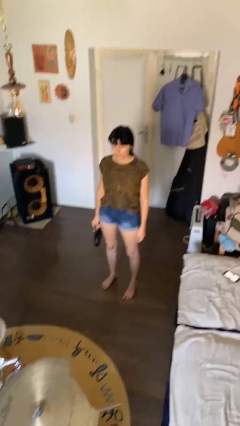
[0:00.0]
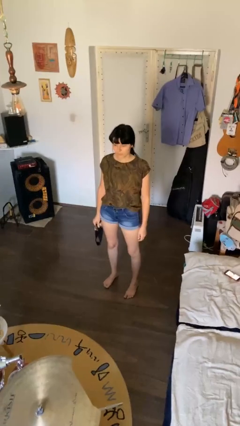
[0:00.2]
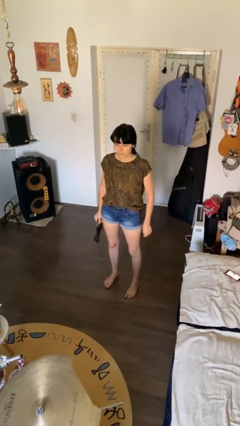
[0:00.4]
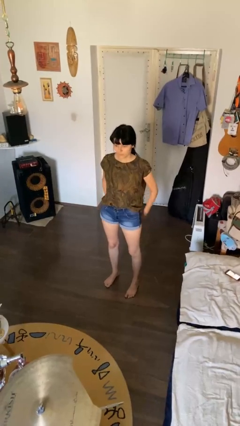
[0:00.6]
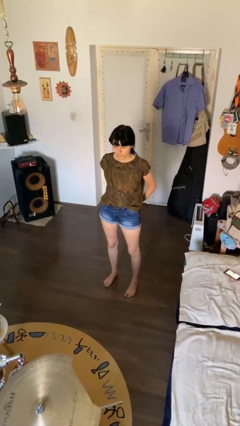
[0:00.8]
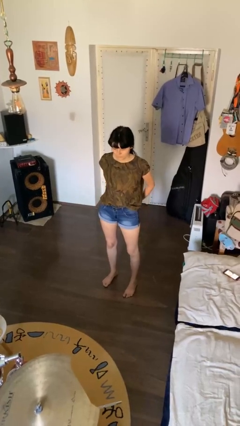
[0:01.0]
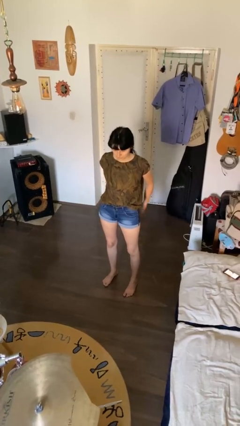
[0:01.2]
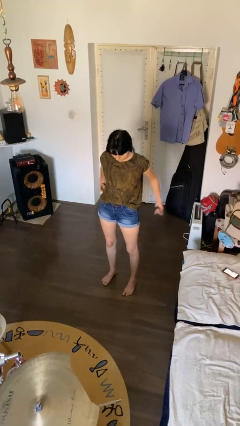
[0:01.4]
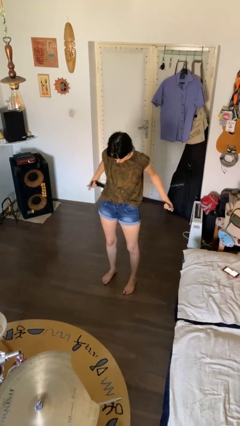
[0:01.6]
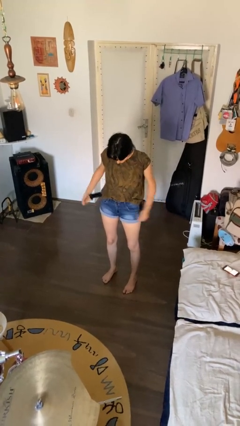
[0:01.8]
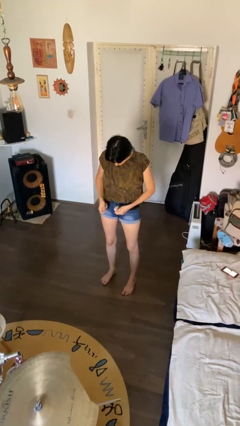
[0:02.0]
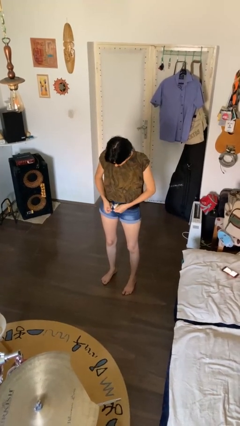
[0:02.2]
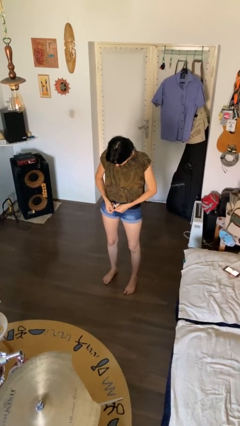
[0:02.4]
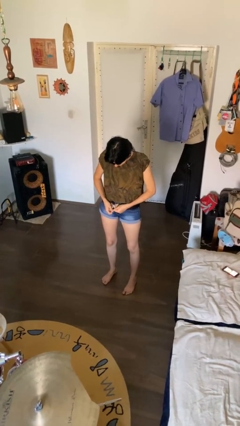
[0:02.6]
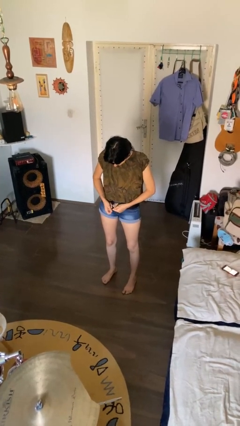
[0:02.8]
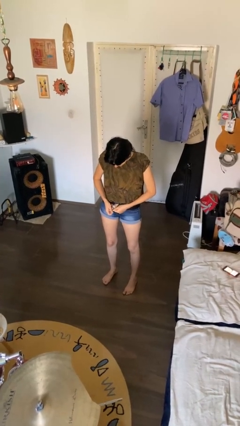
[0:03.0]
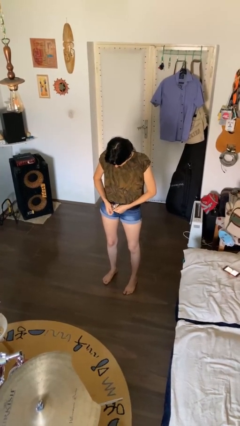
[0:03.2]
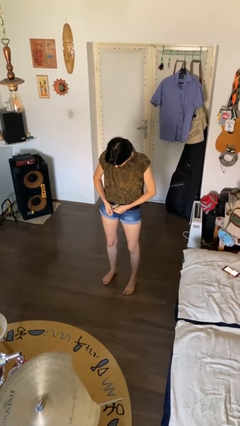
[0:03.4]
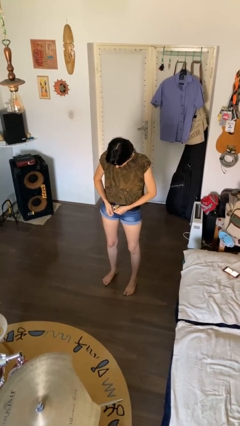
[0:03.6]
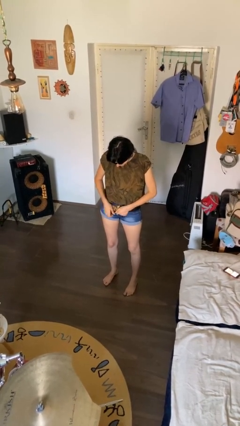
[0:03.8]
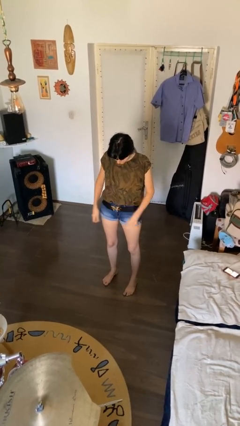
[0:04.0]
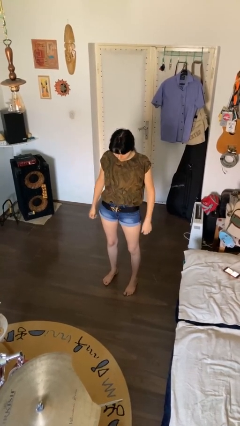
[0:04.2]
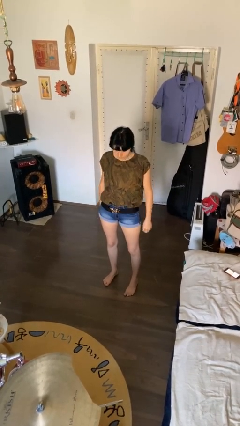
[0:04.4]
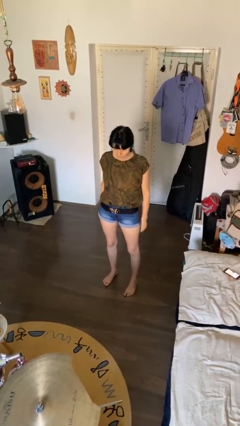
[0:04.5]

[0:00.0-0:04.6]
person puts on belt

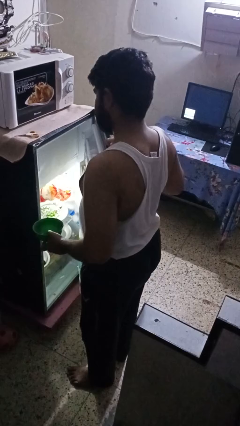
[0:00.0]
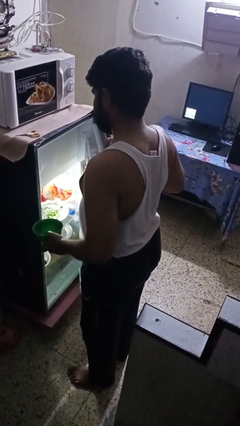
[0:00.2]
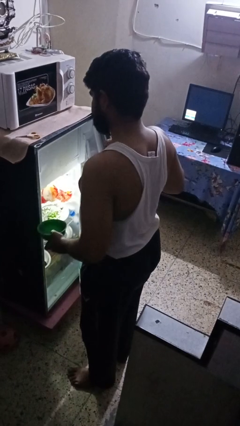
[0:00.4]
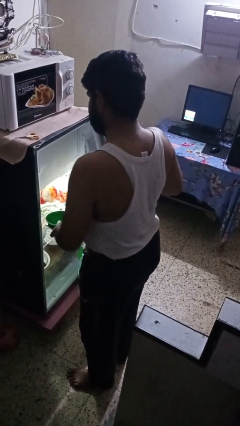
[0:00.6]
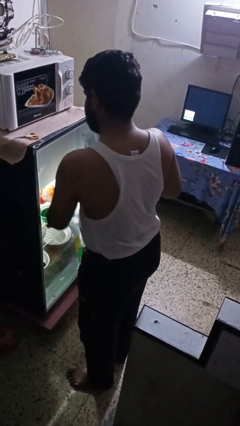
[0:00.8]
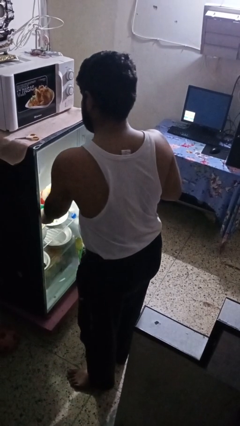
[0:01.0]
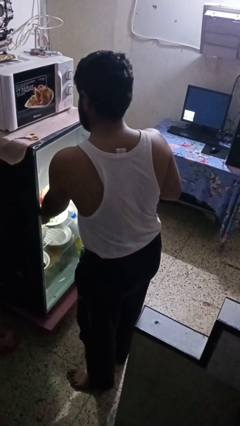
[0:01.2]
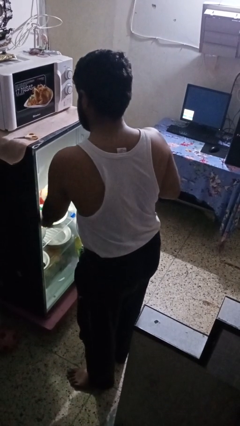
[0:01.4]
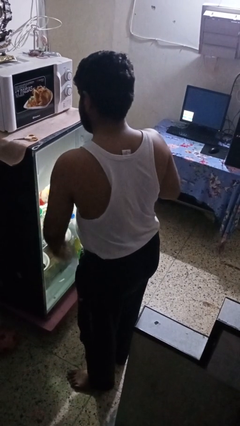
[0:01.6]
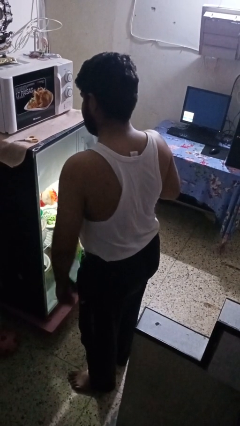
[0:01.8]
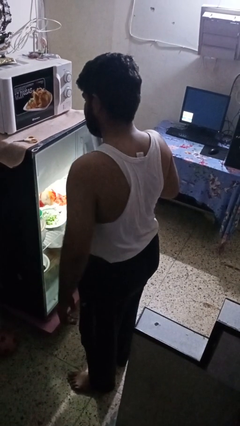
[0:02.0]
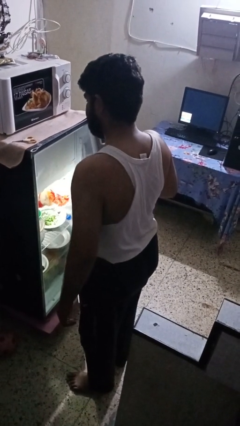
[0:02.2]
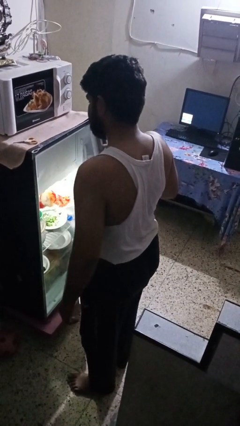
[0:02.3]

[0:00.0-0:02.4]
person puts object into refrigerator

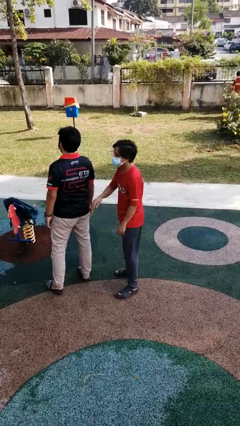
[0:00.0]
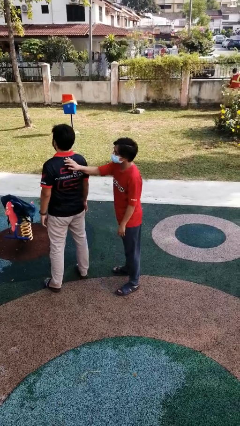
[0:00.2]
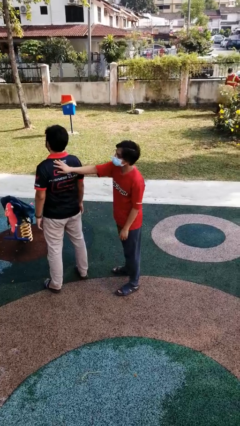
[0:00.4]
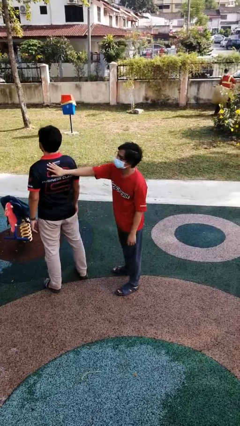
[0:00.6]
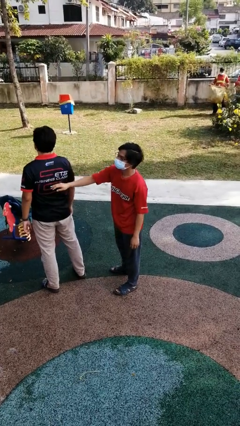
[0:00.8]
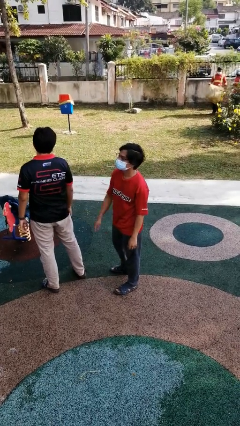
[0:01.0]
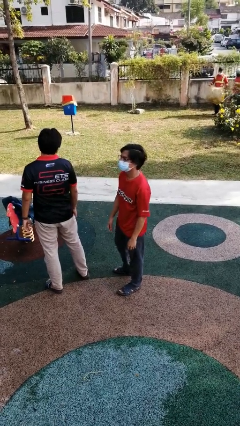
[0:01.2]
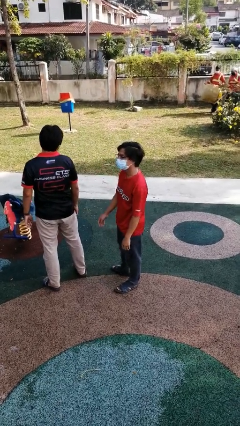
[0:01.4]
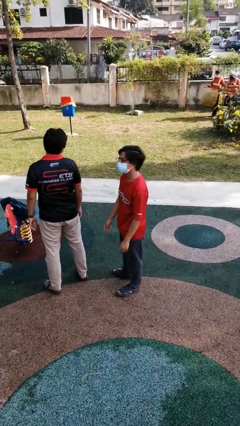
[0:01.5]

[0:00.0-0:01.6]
person touches back of person

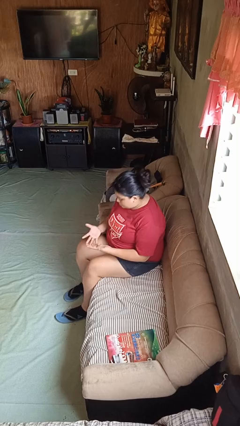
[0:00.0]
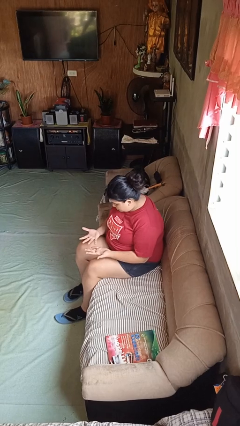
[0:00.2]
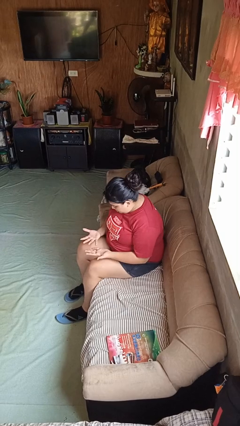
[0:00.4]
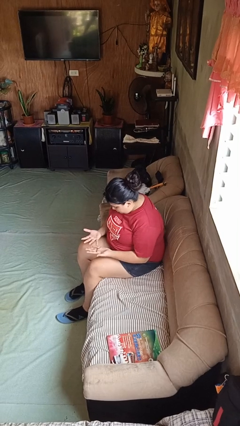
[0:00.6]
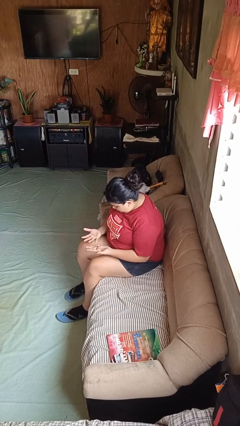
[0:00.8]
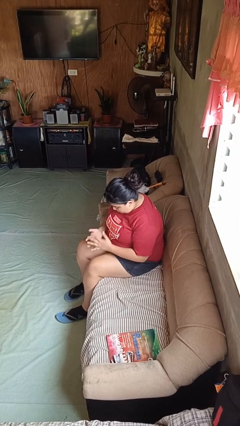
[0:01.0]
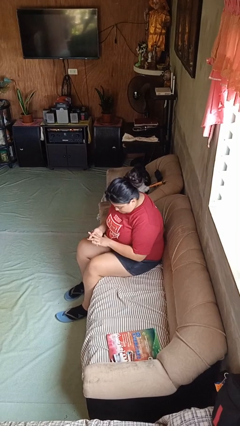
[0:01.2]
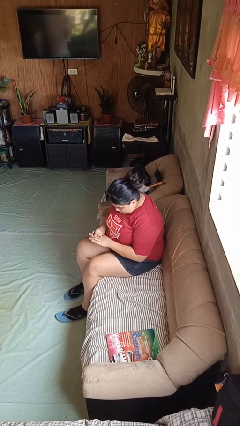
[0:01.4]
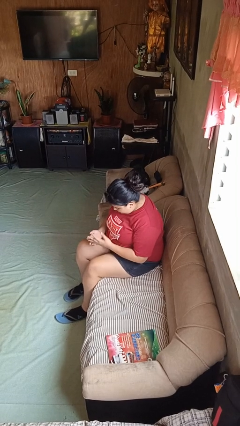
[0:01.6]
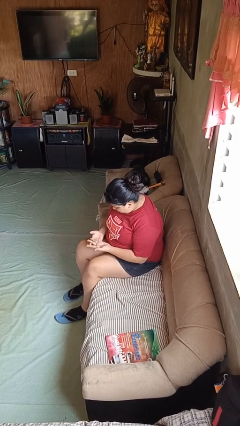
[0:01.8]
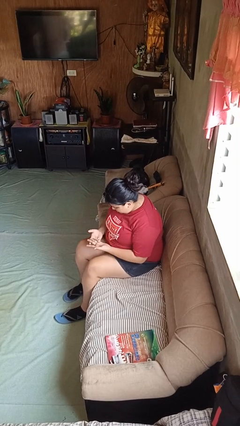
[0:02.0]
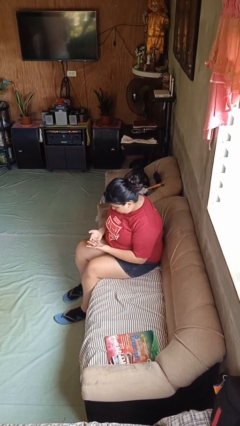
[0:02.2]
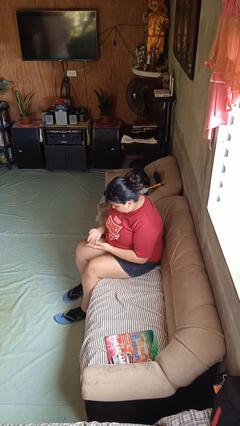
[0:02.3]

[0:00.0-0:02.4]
person looks at hands in lap

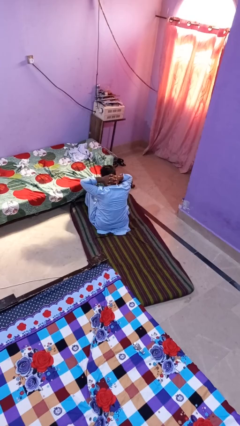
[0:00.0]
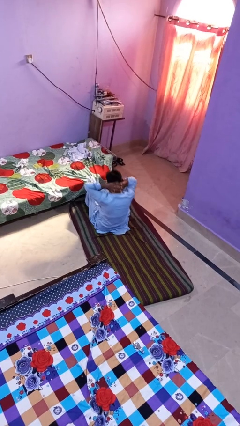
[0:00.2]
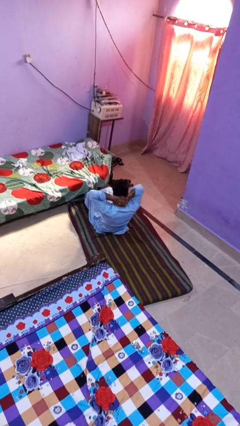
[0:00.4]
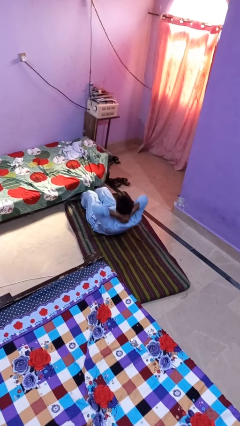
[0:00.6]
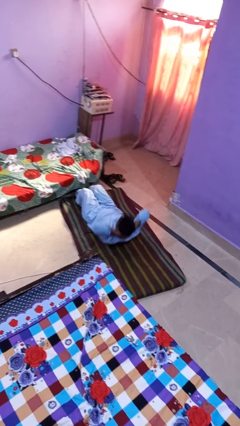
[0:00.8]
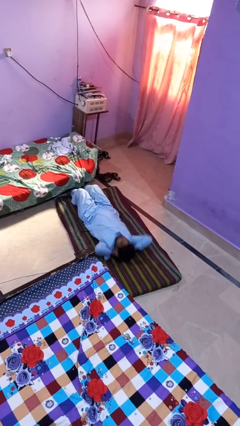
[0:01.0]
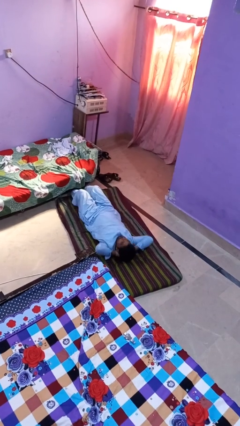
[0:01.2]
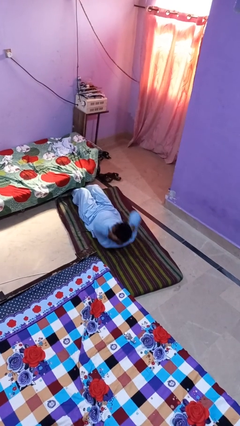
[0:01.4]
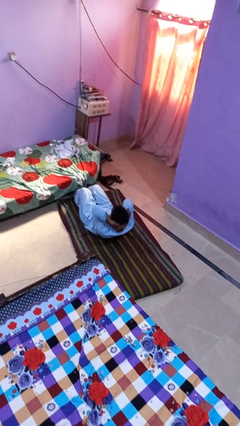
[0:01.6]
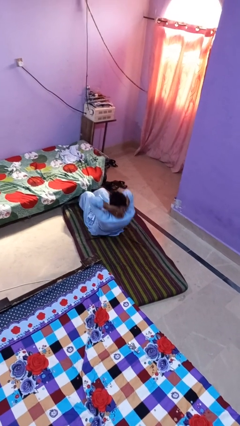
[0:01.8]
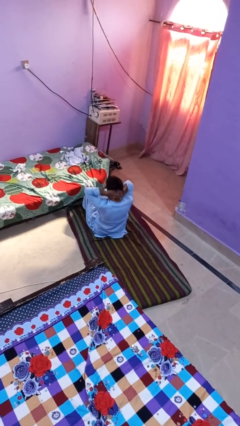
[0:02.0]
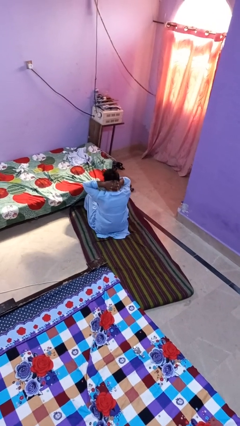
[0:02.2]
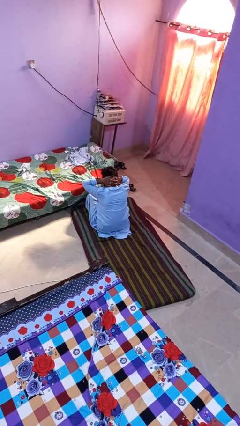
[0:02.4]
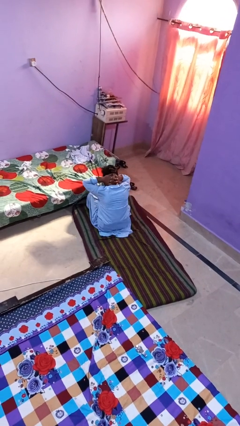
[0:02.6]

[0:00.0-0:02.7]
person exercises with situp

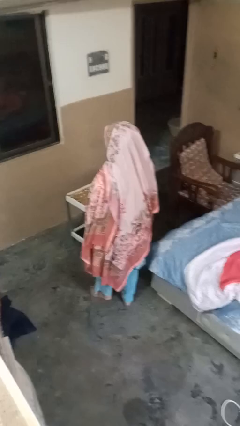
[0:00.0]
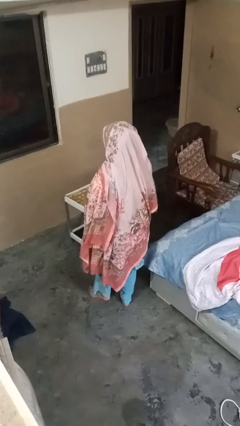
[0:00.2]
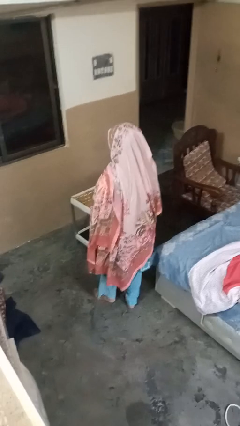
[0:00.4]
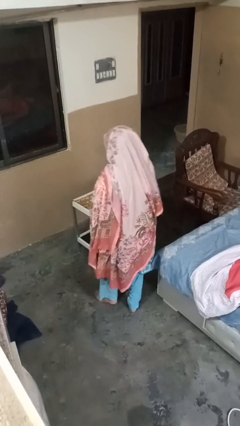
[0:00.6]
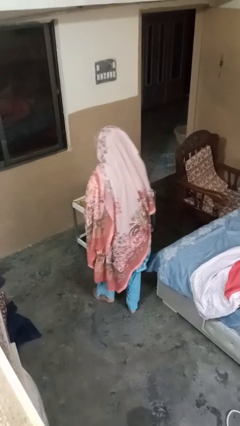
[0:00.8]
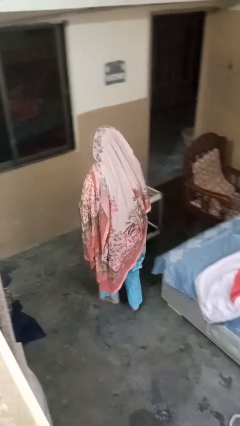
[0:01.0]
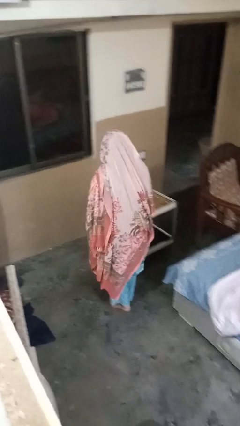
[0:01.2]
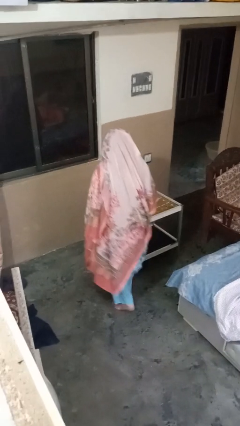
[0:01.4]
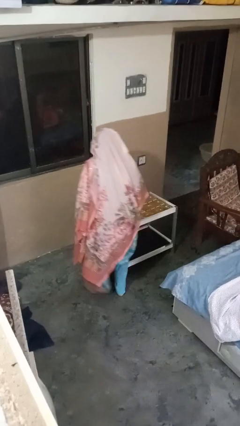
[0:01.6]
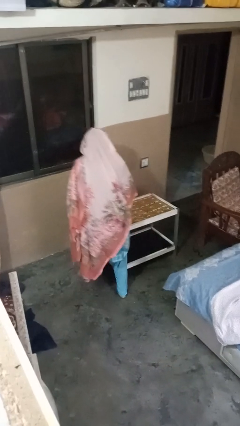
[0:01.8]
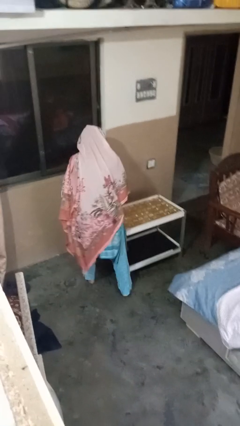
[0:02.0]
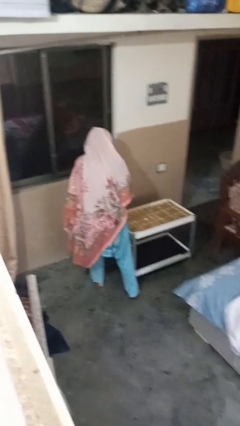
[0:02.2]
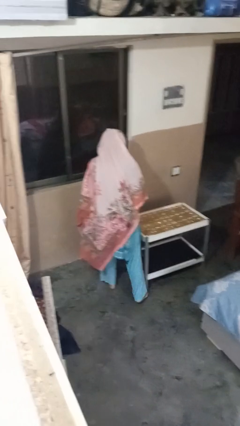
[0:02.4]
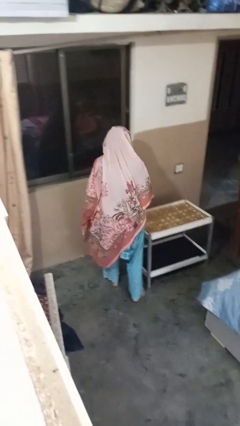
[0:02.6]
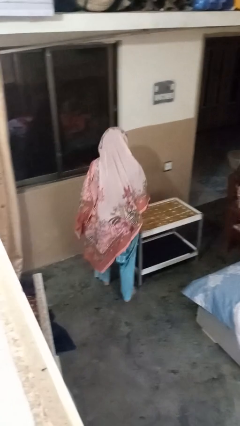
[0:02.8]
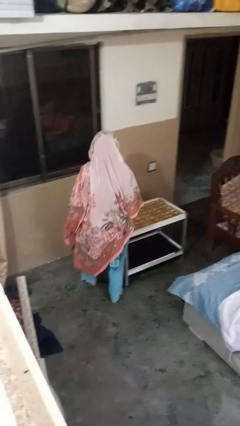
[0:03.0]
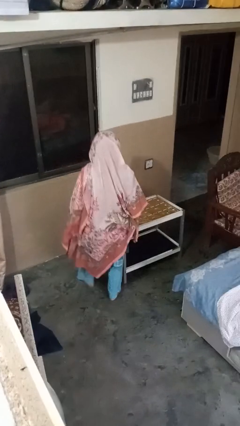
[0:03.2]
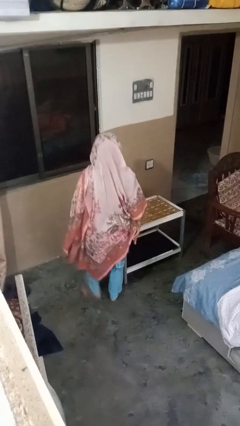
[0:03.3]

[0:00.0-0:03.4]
person bumps into table

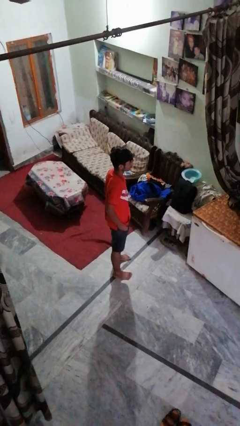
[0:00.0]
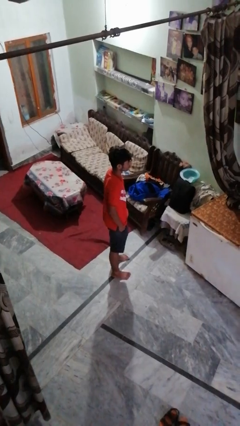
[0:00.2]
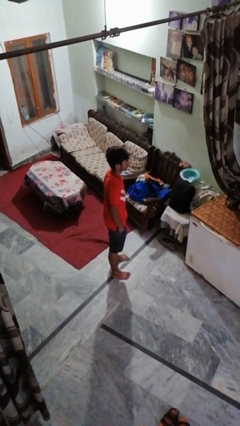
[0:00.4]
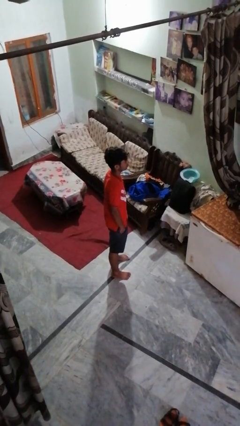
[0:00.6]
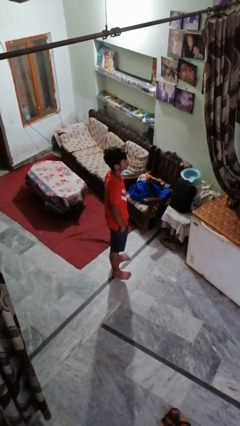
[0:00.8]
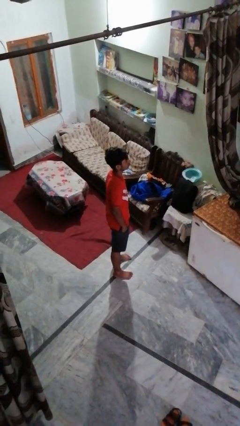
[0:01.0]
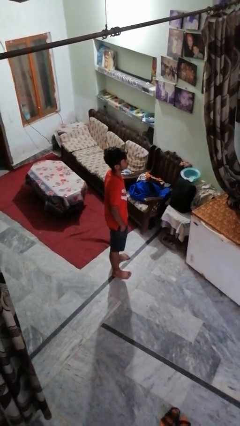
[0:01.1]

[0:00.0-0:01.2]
person puts hands in back pockets
